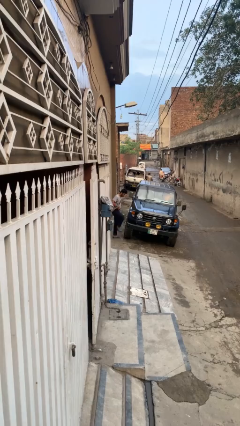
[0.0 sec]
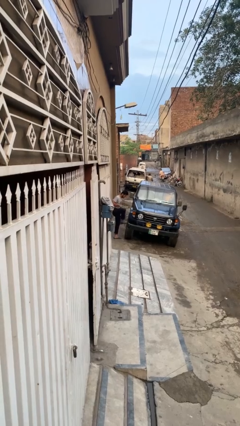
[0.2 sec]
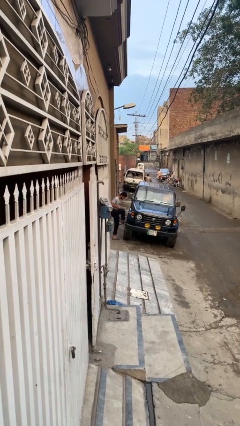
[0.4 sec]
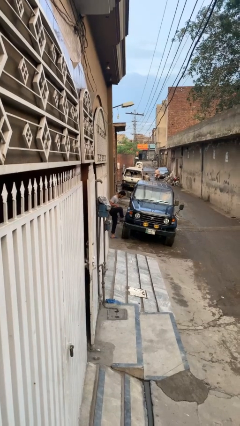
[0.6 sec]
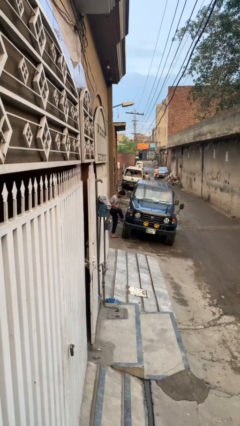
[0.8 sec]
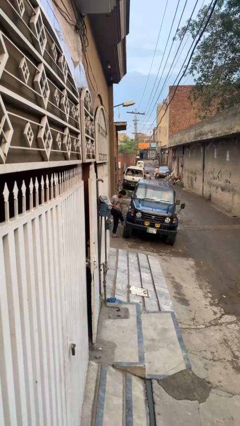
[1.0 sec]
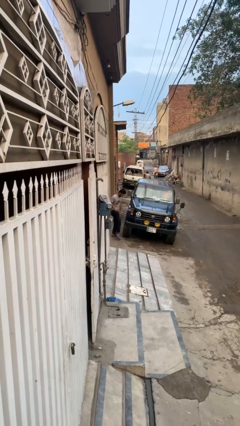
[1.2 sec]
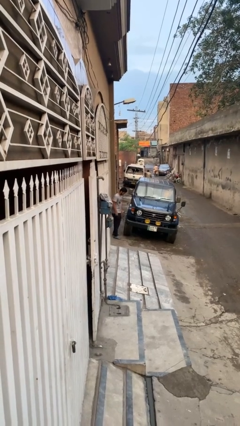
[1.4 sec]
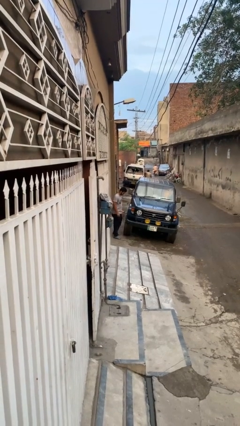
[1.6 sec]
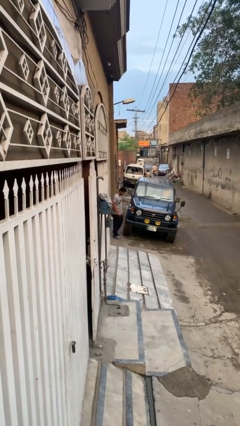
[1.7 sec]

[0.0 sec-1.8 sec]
person kicks car tires

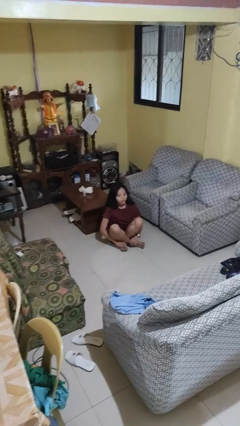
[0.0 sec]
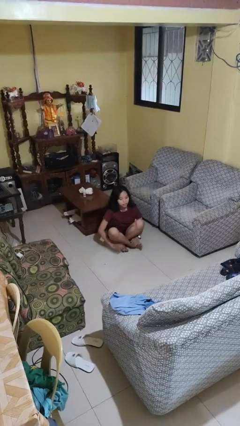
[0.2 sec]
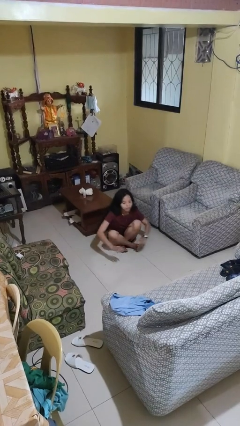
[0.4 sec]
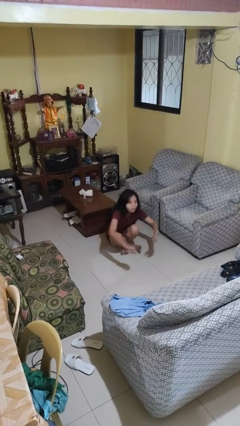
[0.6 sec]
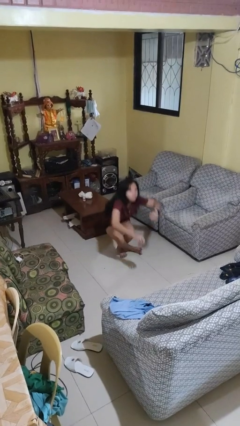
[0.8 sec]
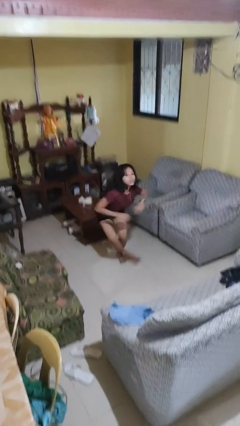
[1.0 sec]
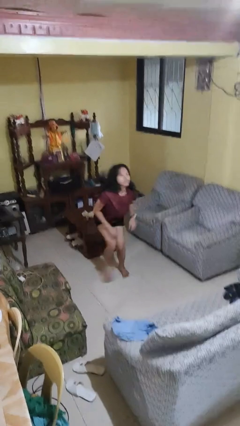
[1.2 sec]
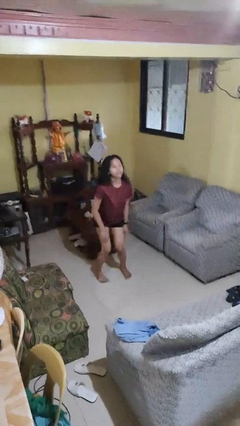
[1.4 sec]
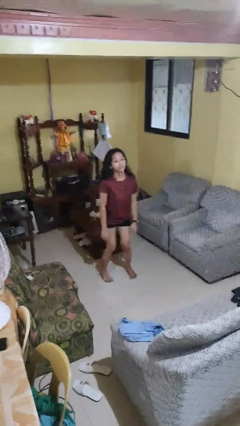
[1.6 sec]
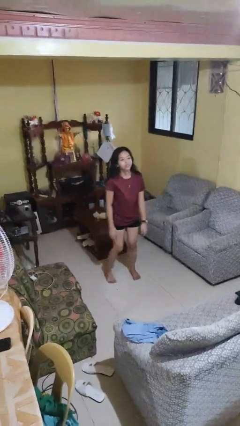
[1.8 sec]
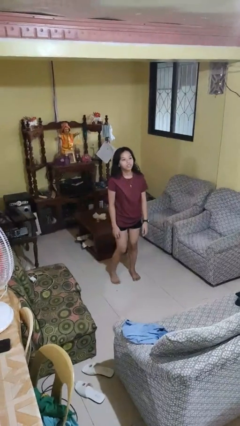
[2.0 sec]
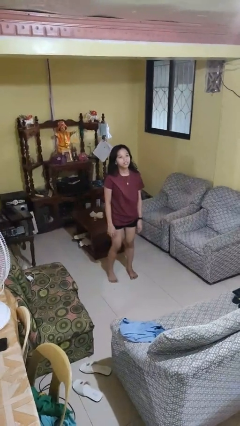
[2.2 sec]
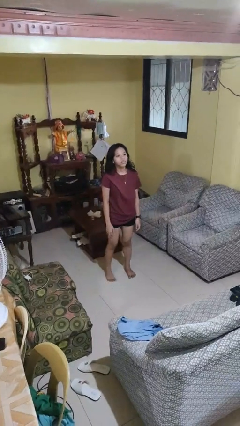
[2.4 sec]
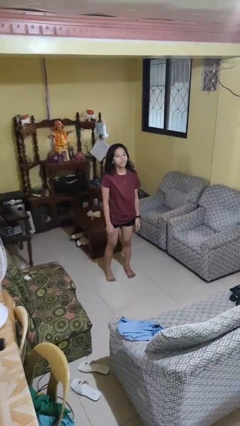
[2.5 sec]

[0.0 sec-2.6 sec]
person stands up from floor

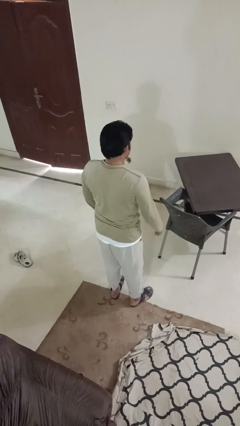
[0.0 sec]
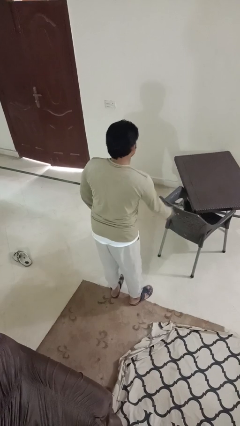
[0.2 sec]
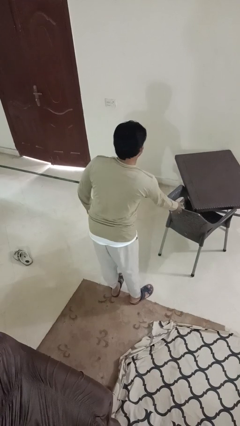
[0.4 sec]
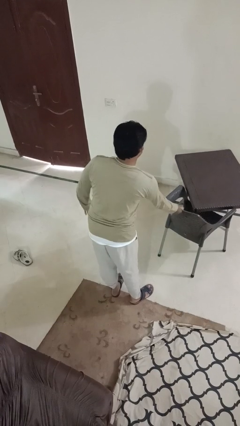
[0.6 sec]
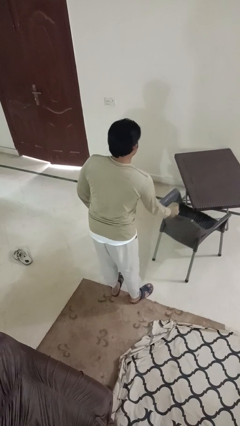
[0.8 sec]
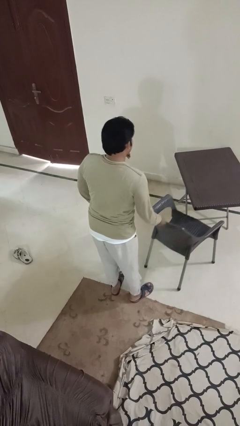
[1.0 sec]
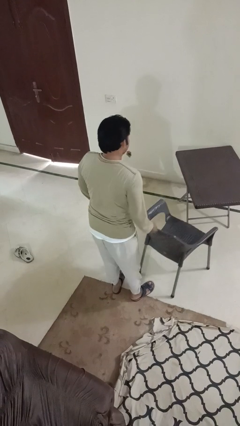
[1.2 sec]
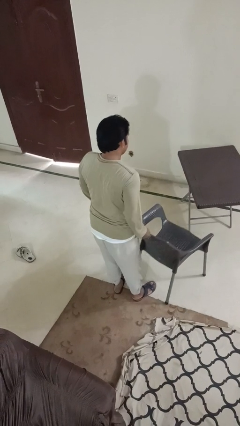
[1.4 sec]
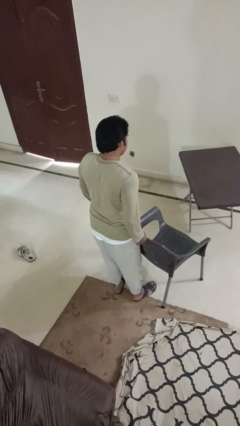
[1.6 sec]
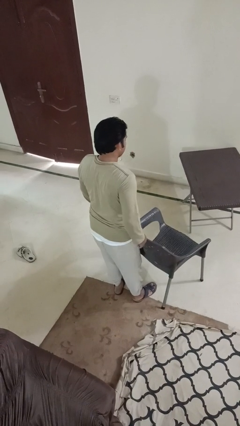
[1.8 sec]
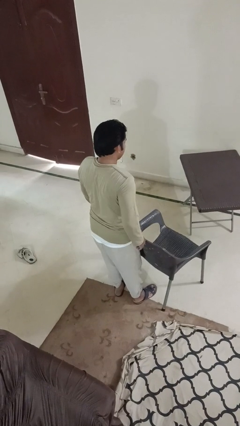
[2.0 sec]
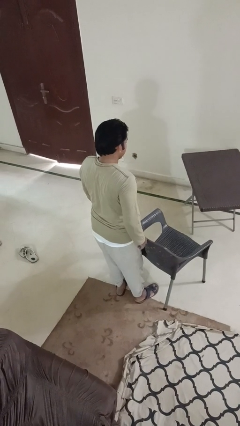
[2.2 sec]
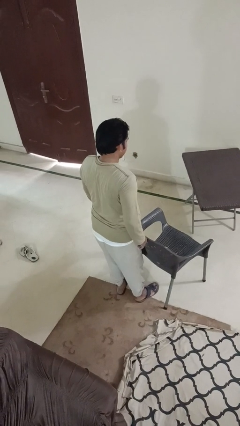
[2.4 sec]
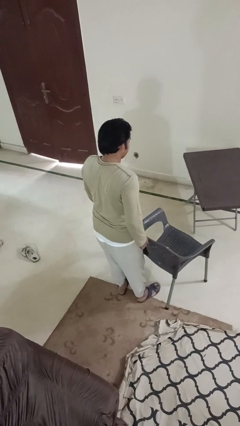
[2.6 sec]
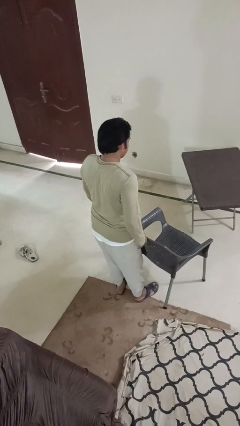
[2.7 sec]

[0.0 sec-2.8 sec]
person pulls out chair

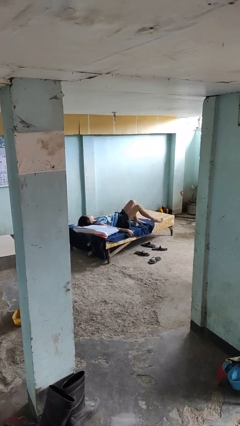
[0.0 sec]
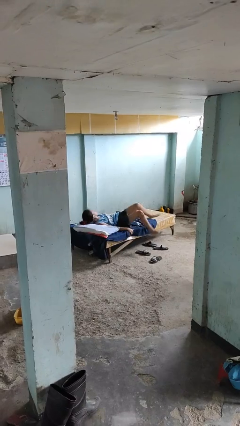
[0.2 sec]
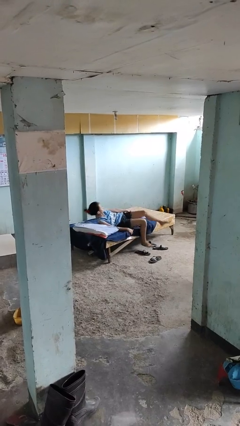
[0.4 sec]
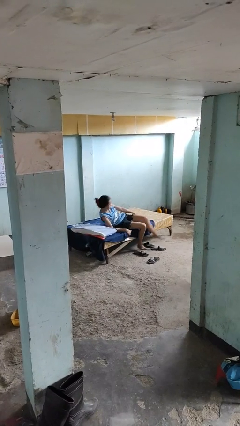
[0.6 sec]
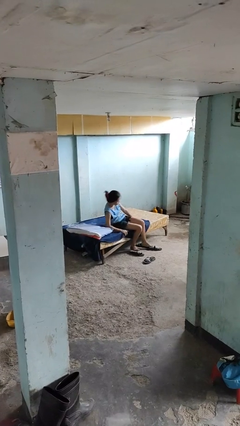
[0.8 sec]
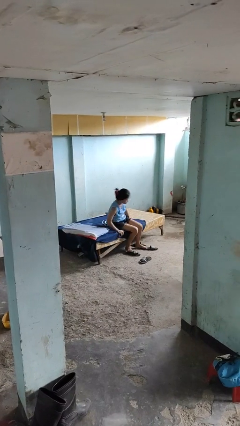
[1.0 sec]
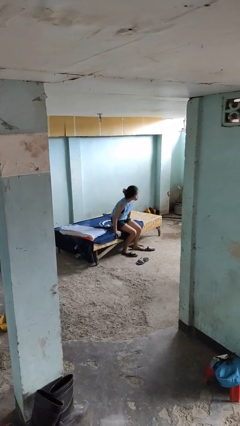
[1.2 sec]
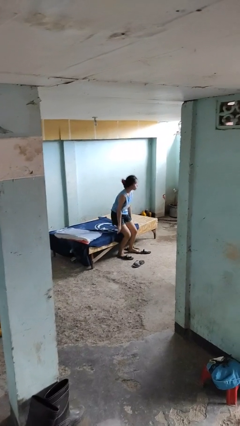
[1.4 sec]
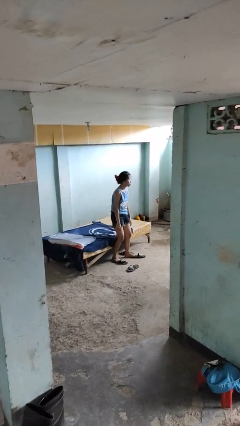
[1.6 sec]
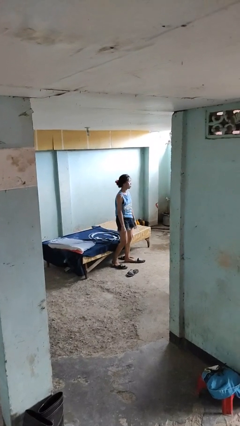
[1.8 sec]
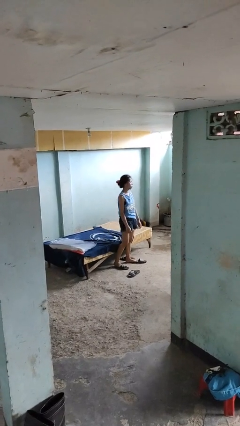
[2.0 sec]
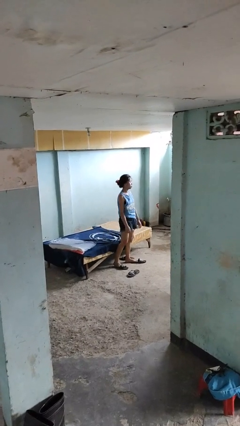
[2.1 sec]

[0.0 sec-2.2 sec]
person stands up

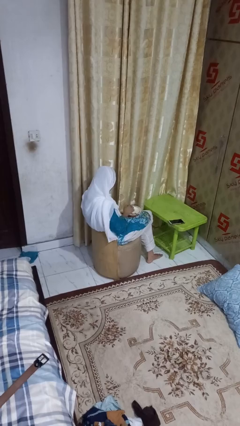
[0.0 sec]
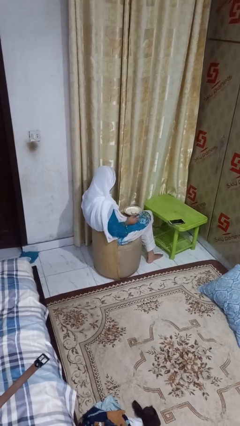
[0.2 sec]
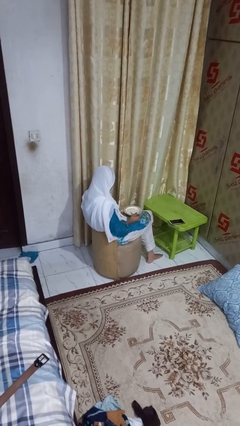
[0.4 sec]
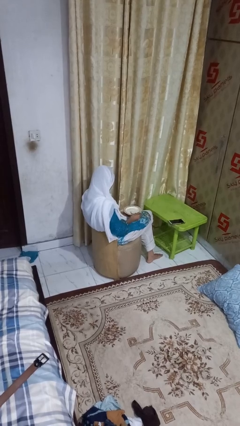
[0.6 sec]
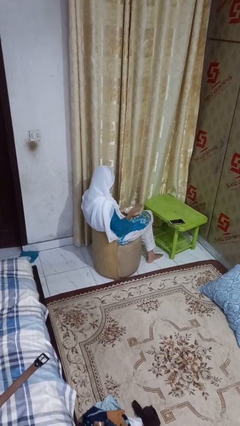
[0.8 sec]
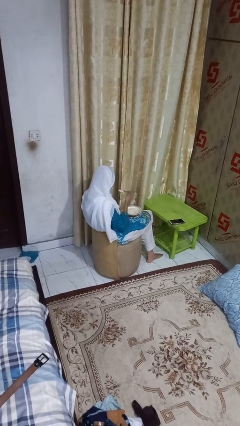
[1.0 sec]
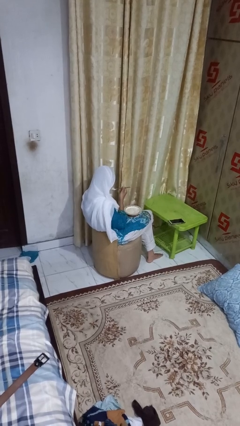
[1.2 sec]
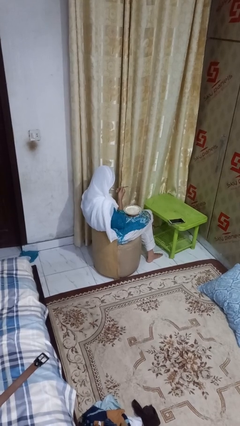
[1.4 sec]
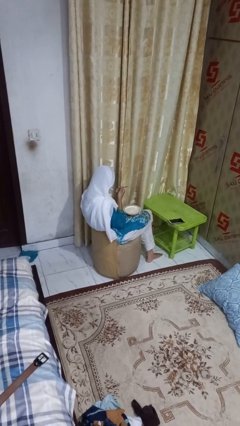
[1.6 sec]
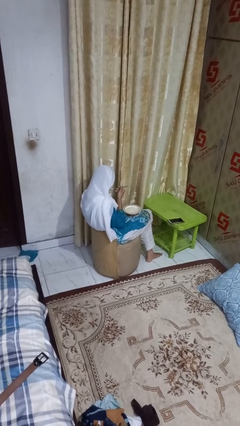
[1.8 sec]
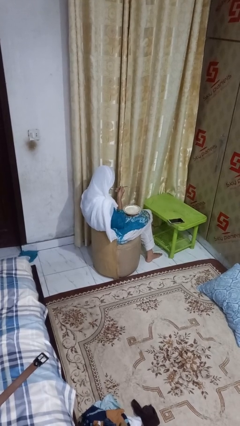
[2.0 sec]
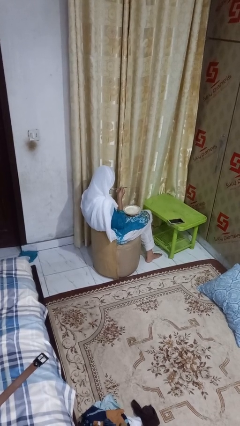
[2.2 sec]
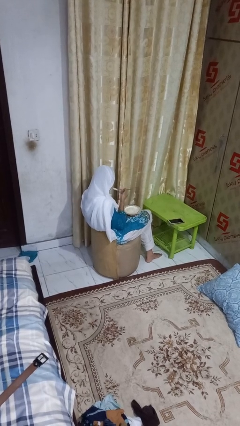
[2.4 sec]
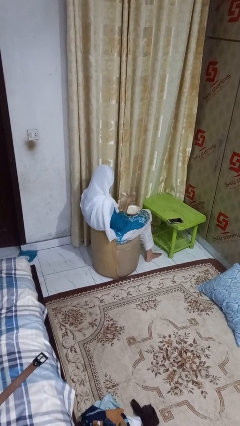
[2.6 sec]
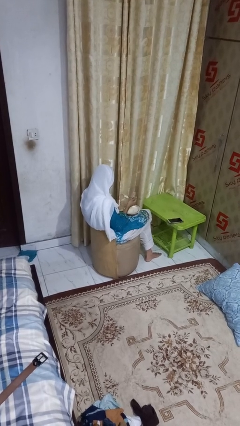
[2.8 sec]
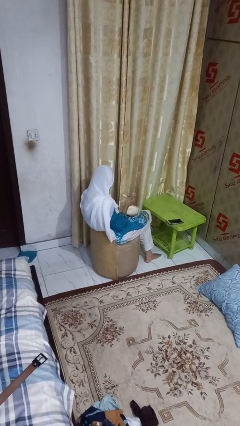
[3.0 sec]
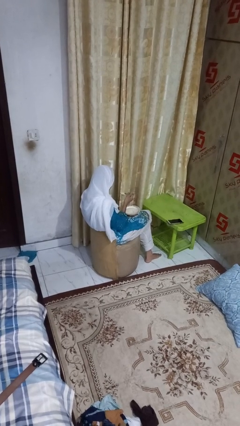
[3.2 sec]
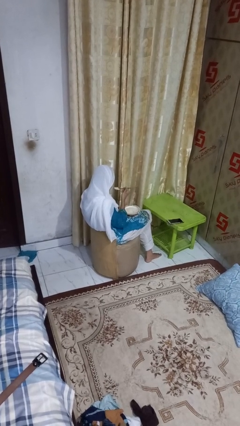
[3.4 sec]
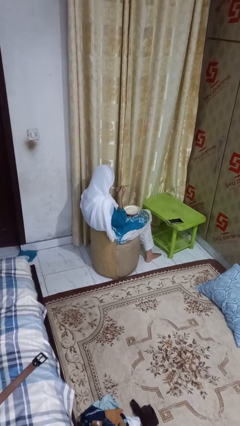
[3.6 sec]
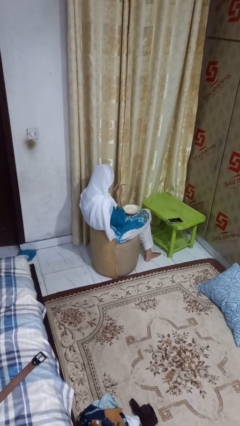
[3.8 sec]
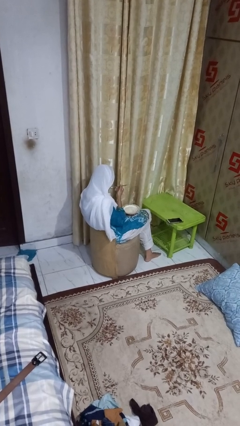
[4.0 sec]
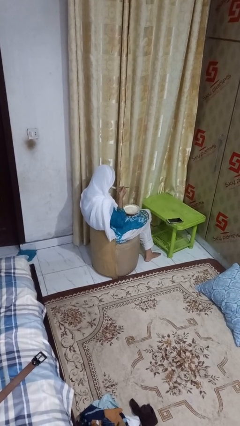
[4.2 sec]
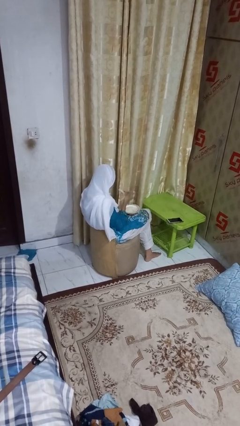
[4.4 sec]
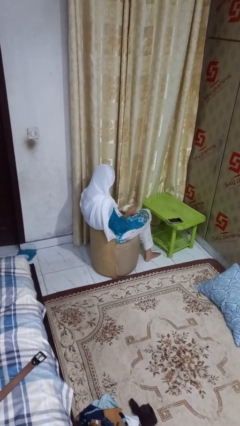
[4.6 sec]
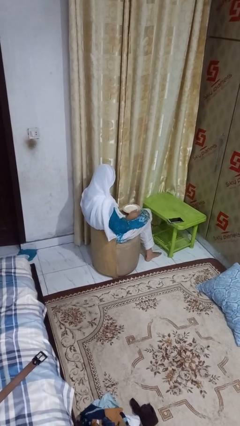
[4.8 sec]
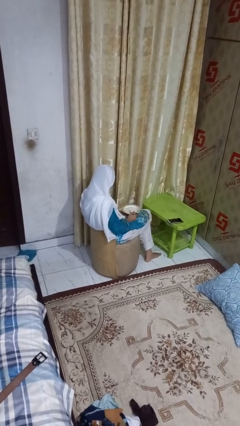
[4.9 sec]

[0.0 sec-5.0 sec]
person eats with utensil

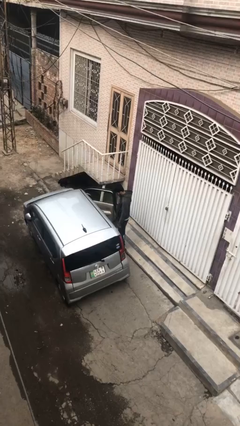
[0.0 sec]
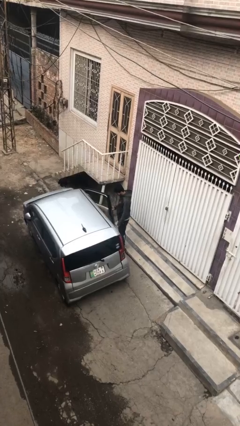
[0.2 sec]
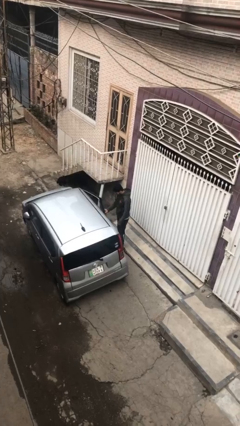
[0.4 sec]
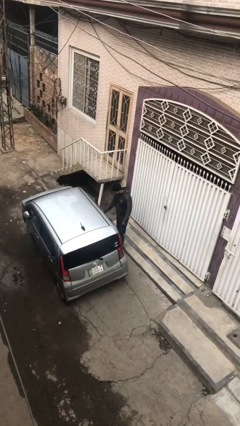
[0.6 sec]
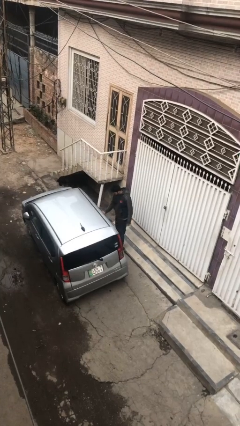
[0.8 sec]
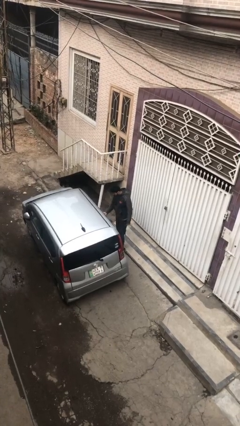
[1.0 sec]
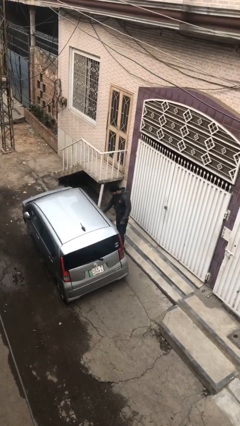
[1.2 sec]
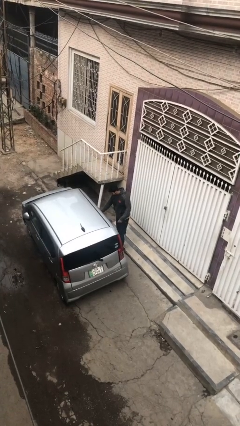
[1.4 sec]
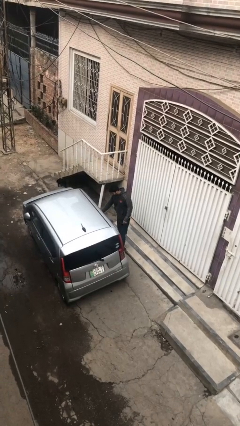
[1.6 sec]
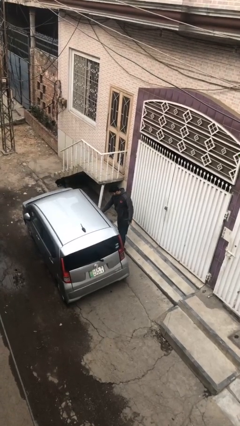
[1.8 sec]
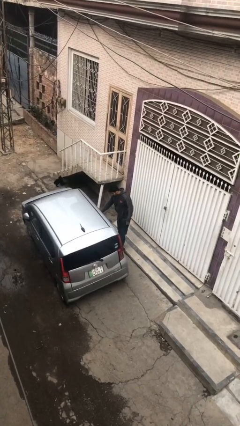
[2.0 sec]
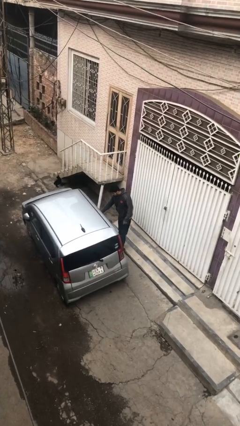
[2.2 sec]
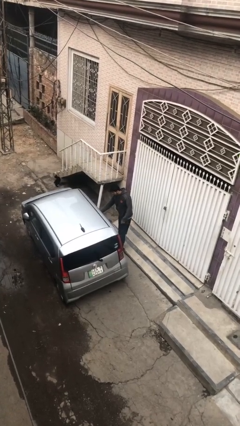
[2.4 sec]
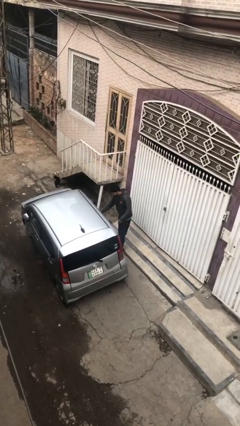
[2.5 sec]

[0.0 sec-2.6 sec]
person closes car door

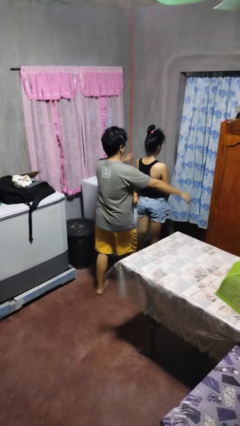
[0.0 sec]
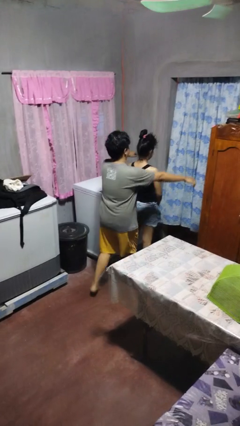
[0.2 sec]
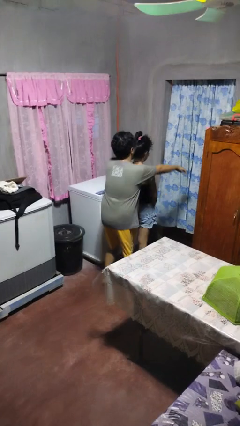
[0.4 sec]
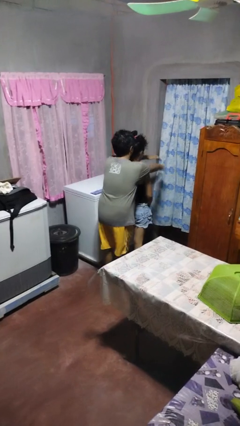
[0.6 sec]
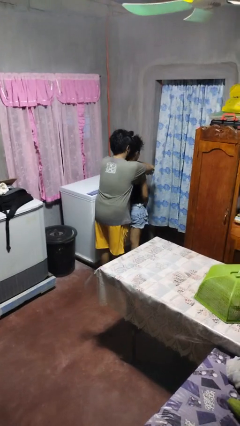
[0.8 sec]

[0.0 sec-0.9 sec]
person hugs person from behind
